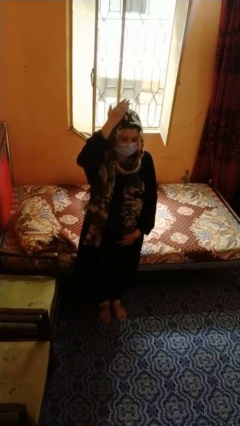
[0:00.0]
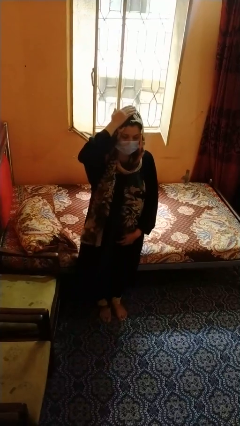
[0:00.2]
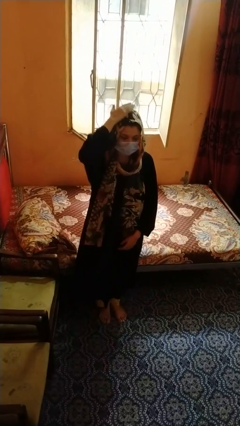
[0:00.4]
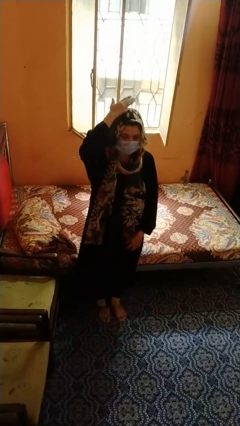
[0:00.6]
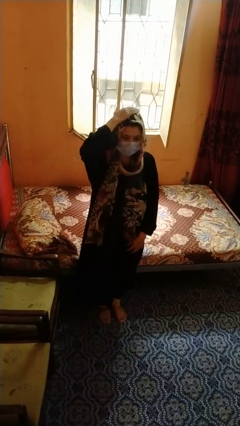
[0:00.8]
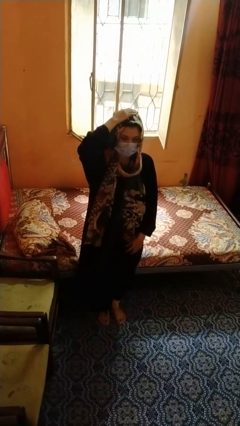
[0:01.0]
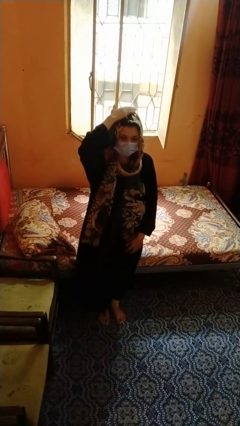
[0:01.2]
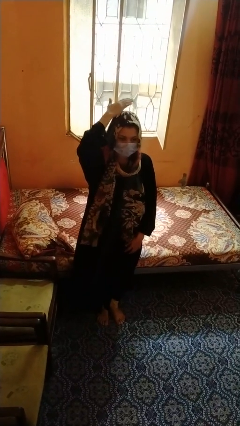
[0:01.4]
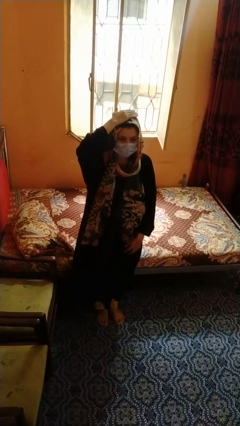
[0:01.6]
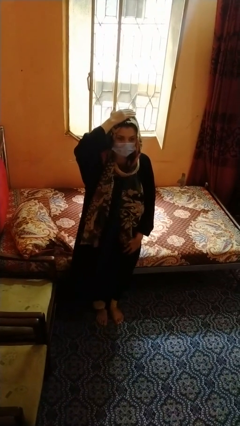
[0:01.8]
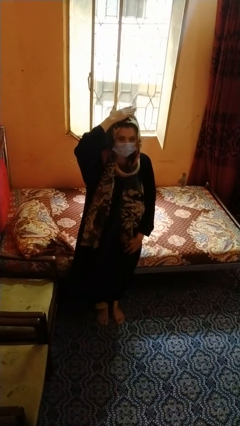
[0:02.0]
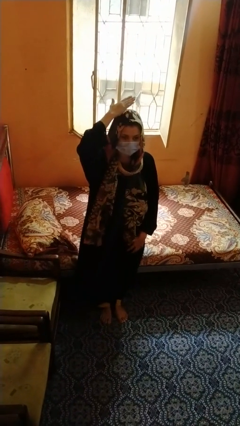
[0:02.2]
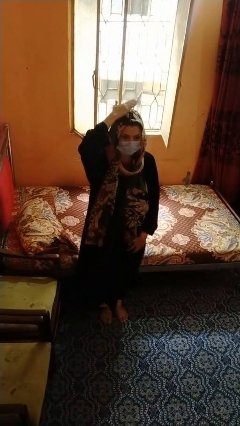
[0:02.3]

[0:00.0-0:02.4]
person pats head

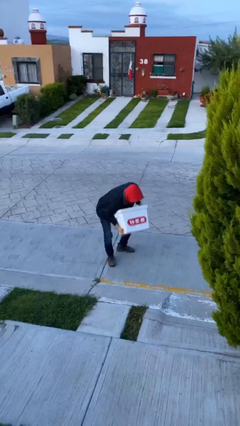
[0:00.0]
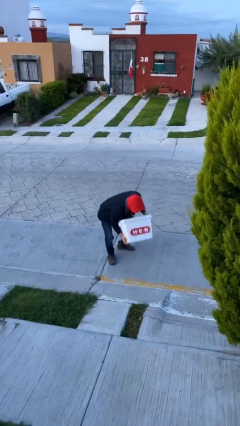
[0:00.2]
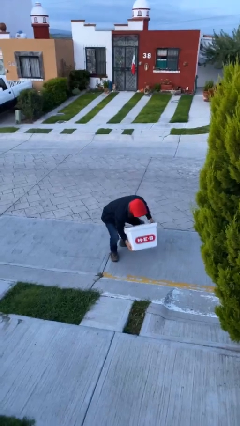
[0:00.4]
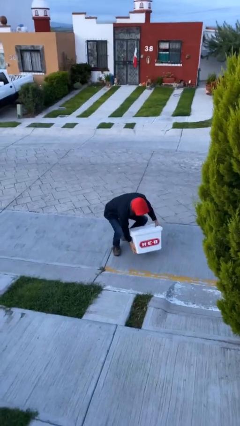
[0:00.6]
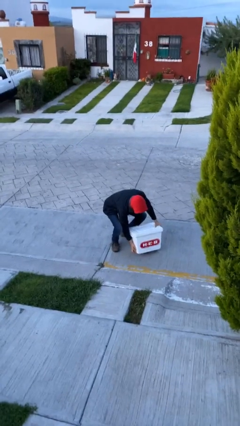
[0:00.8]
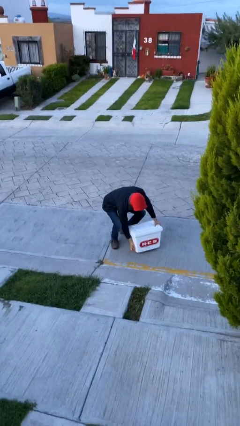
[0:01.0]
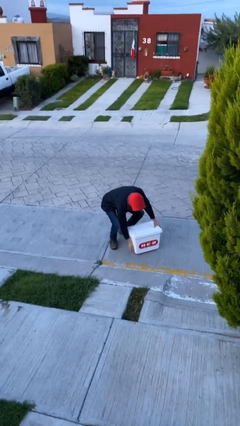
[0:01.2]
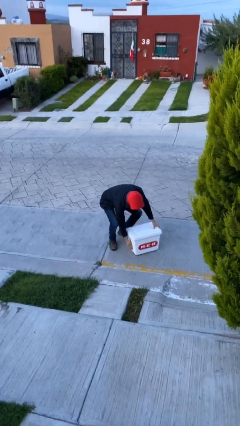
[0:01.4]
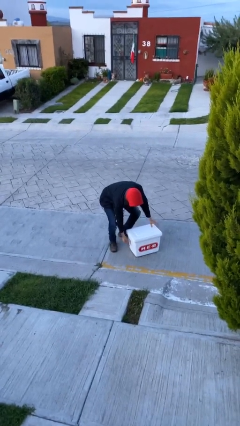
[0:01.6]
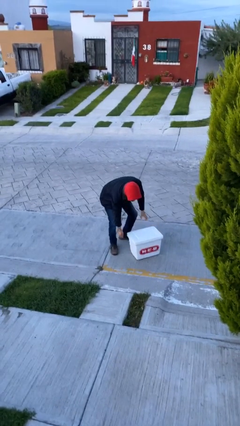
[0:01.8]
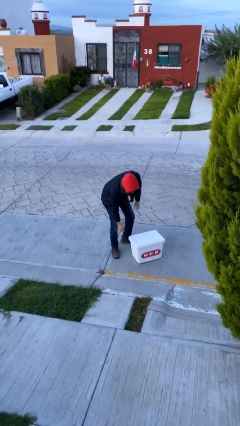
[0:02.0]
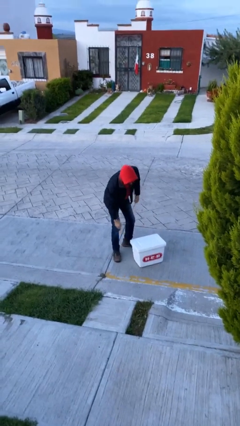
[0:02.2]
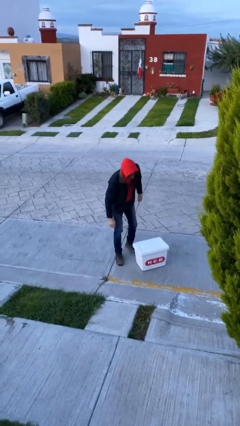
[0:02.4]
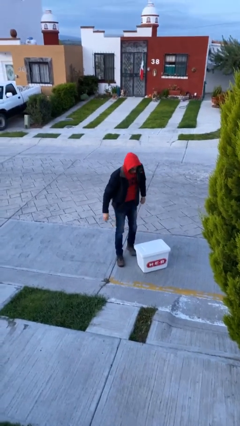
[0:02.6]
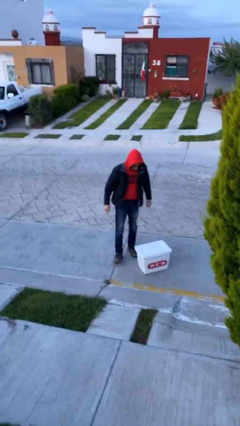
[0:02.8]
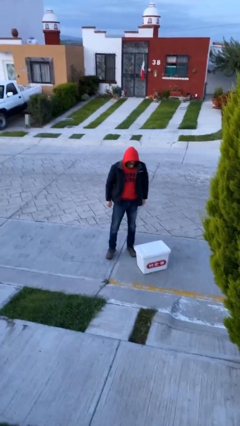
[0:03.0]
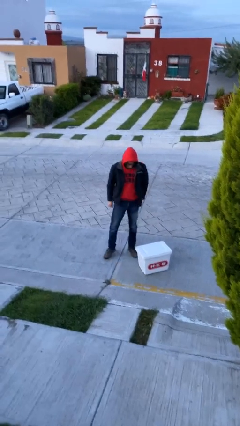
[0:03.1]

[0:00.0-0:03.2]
person puts down object on floor

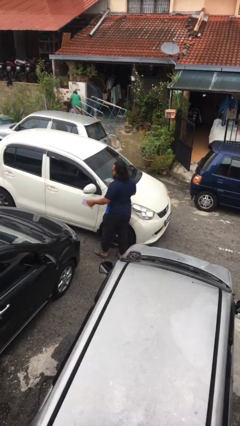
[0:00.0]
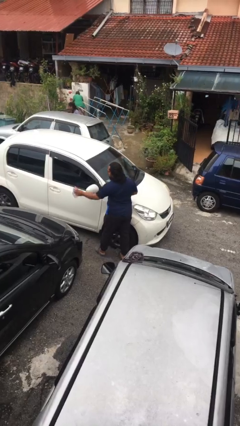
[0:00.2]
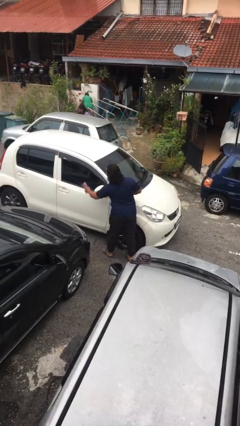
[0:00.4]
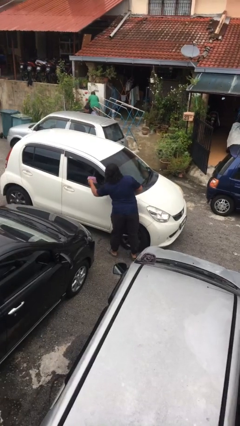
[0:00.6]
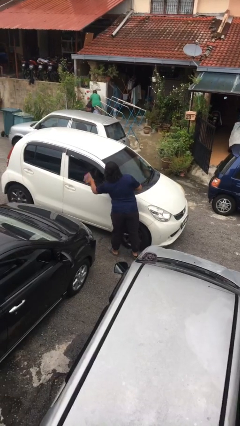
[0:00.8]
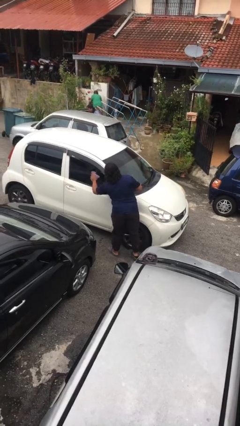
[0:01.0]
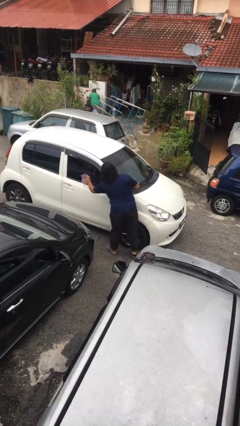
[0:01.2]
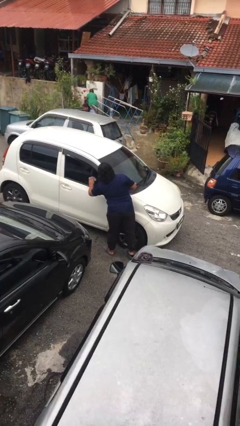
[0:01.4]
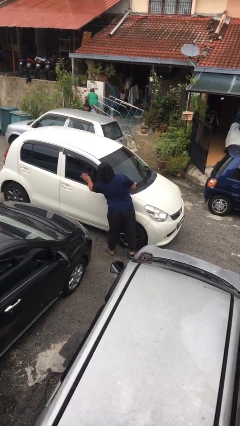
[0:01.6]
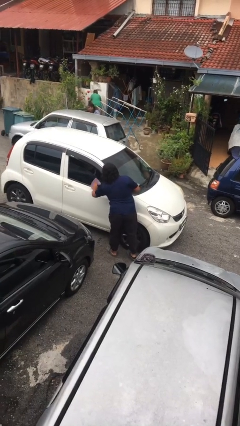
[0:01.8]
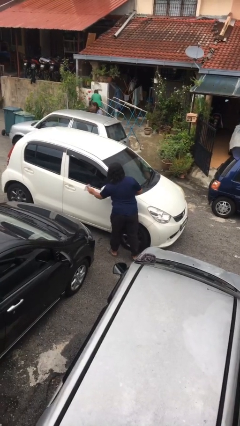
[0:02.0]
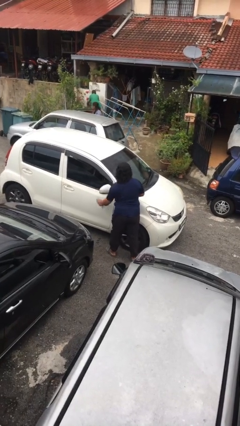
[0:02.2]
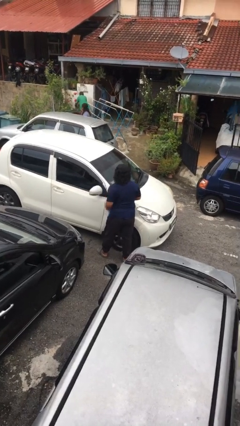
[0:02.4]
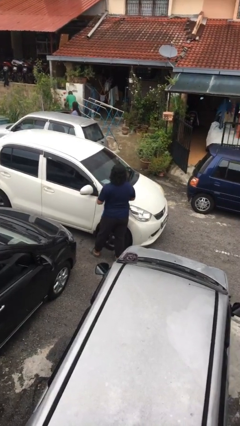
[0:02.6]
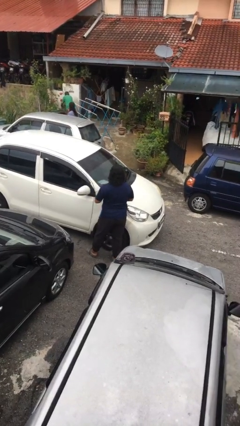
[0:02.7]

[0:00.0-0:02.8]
person polishes car with rag

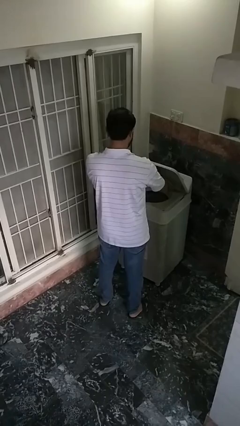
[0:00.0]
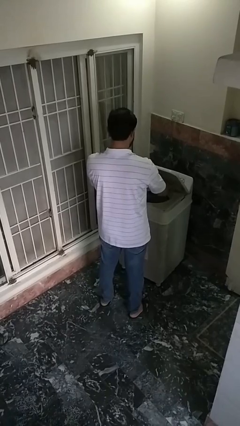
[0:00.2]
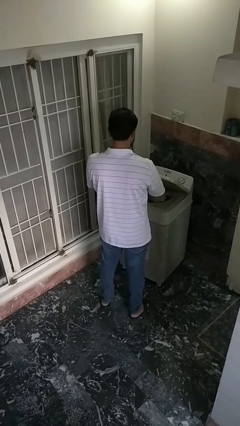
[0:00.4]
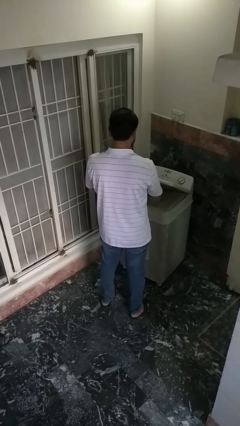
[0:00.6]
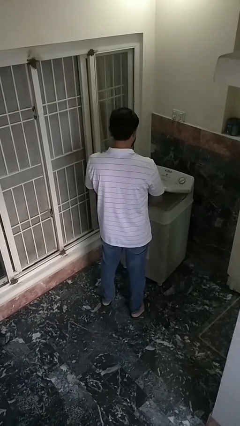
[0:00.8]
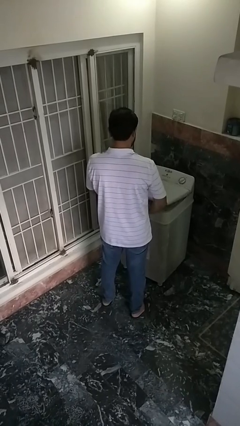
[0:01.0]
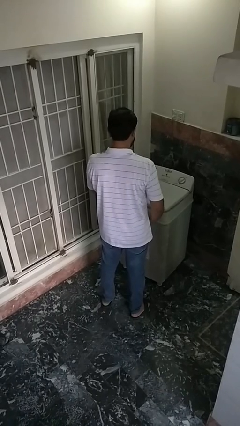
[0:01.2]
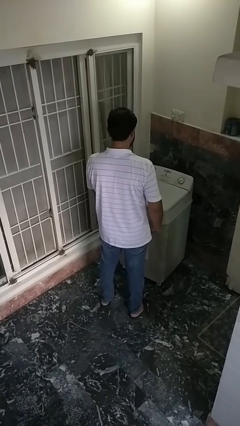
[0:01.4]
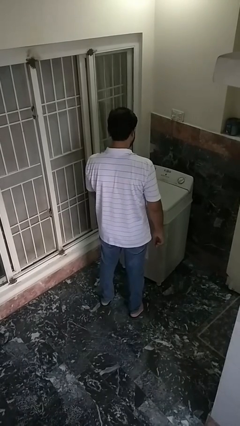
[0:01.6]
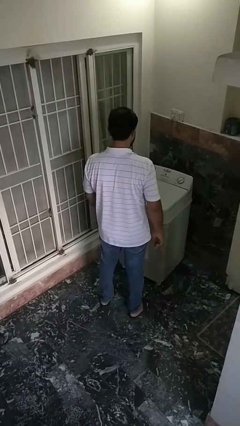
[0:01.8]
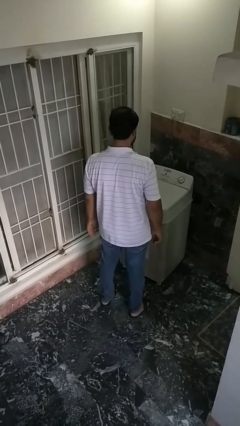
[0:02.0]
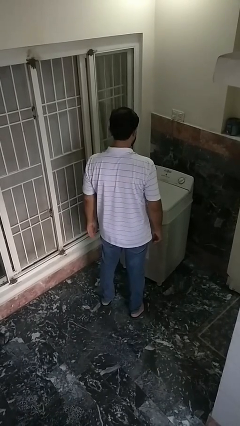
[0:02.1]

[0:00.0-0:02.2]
person closes clothes washer

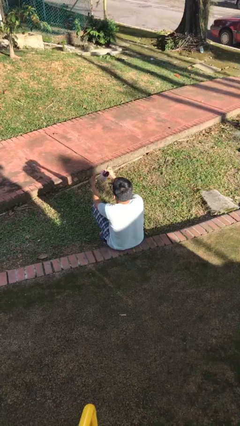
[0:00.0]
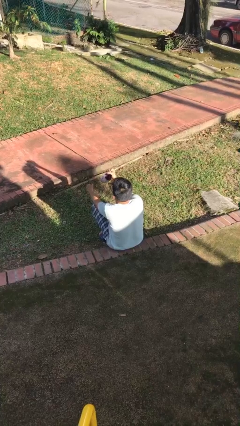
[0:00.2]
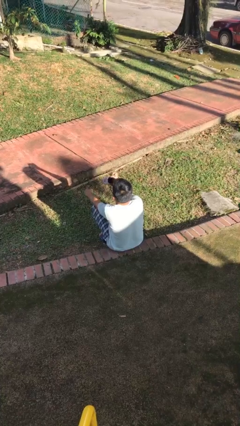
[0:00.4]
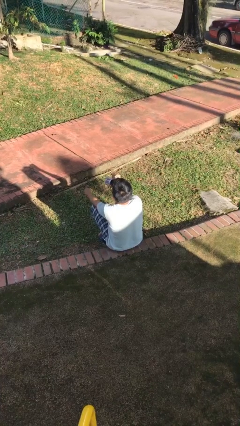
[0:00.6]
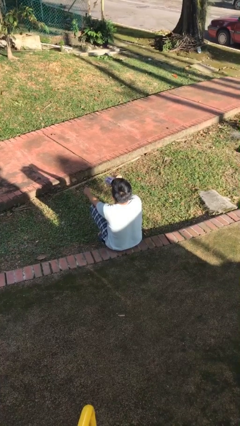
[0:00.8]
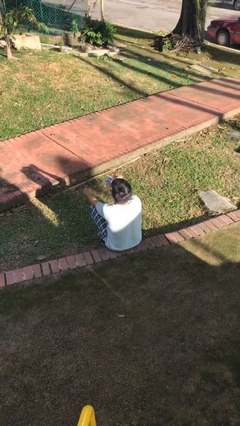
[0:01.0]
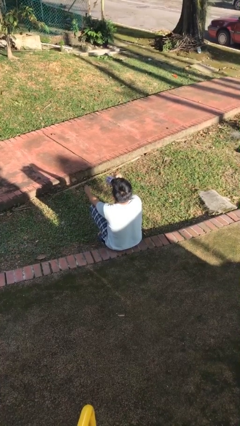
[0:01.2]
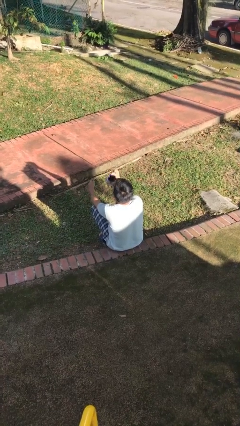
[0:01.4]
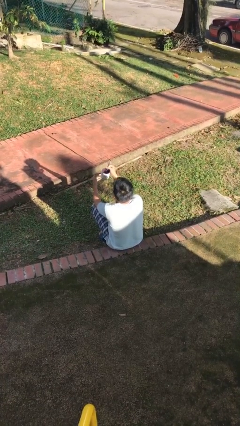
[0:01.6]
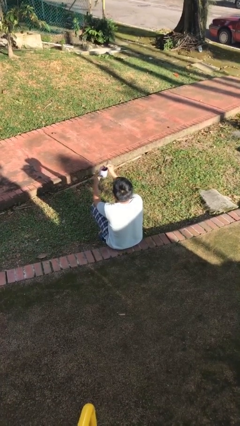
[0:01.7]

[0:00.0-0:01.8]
person drinks from mug

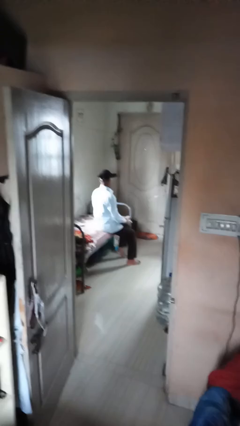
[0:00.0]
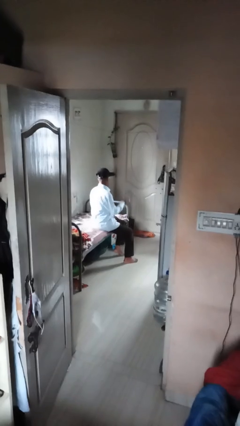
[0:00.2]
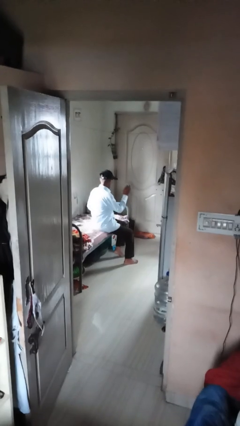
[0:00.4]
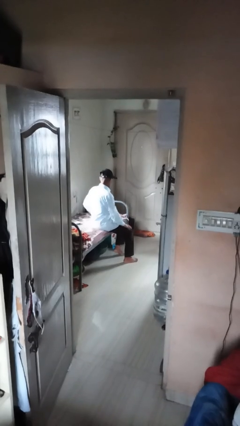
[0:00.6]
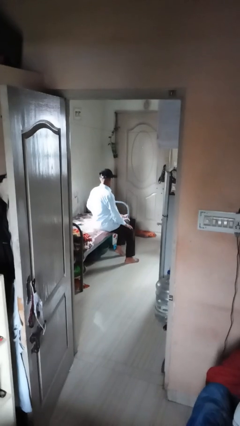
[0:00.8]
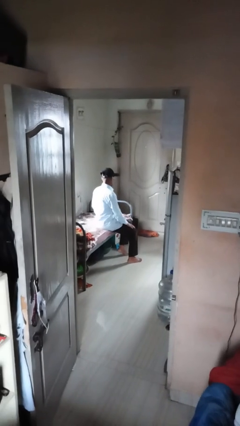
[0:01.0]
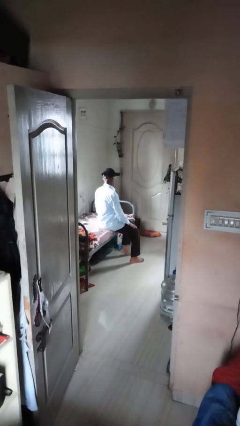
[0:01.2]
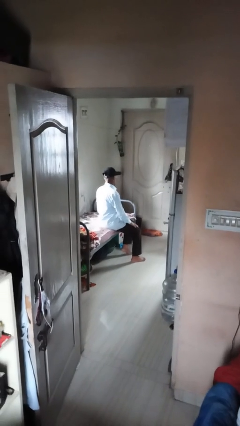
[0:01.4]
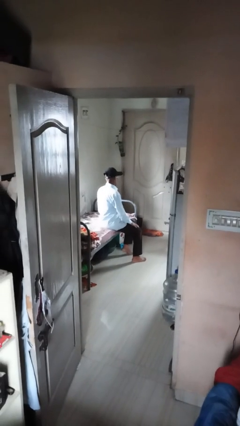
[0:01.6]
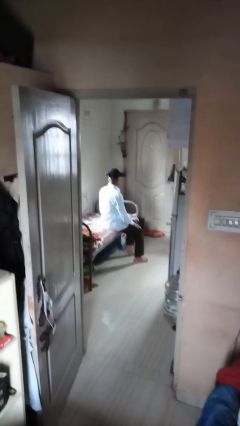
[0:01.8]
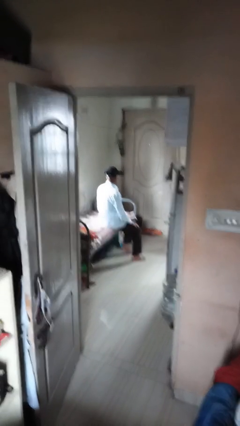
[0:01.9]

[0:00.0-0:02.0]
person swats bug

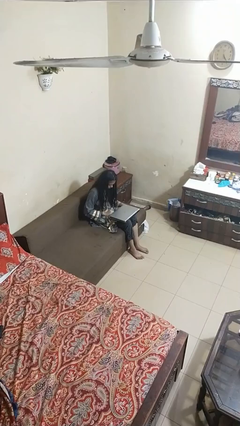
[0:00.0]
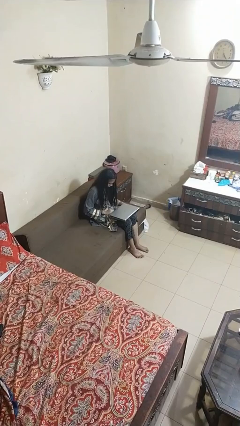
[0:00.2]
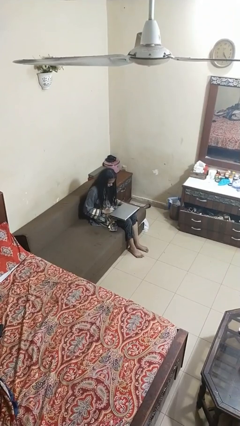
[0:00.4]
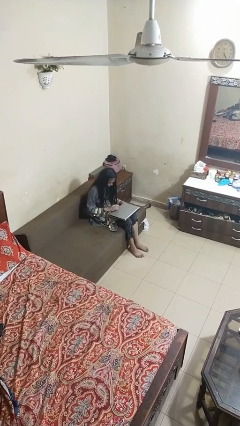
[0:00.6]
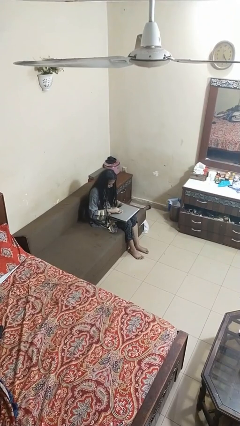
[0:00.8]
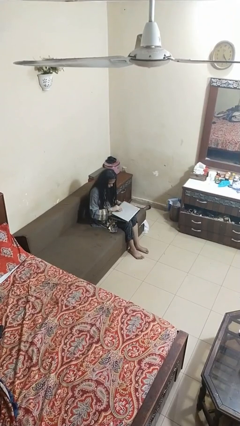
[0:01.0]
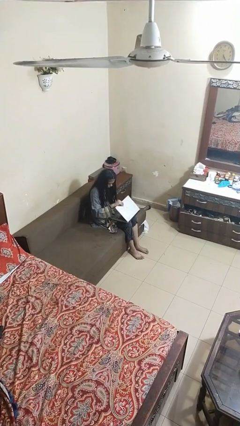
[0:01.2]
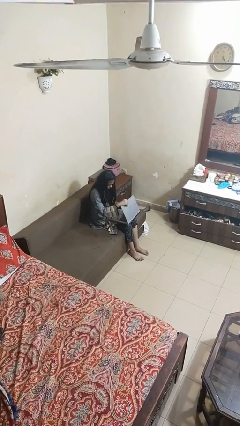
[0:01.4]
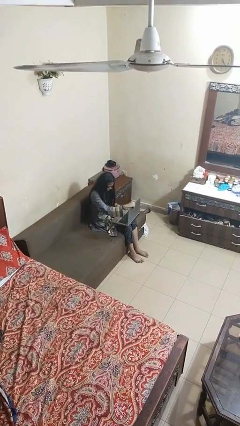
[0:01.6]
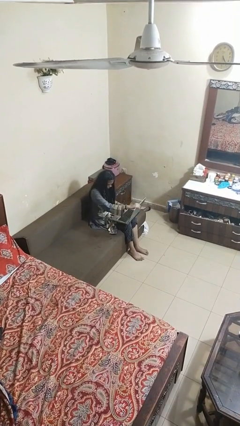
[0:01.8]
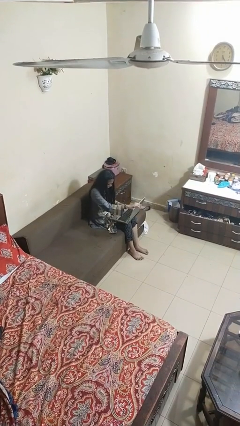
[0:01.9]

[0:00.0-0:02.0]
person opens laptop

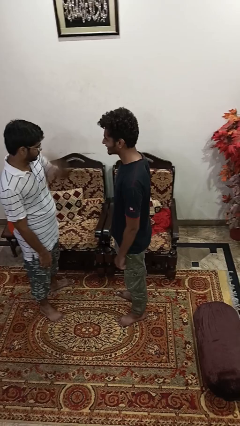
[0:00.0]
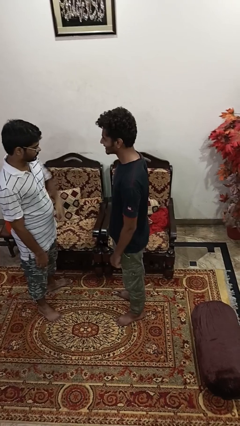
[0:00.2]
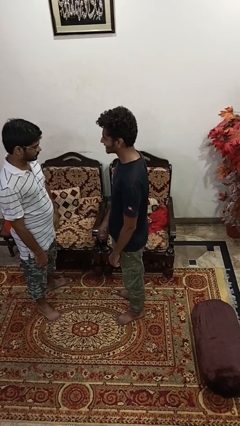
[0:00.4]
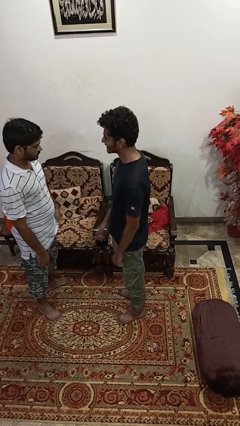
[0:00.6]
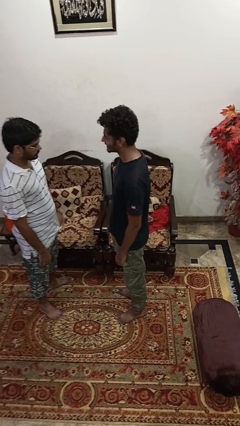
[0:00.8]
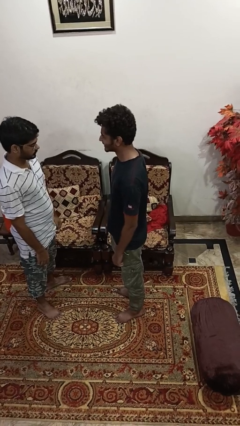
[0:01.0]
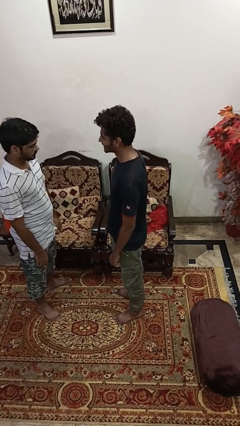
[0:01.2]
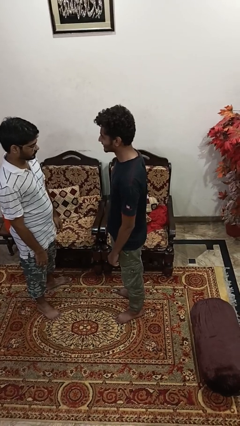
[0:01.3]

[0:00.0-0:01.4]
person spins person around
